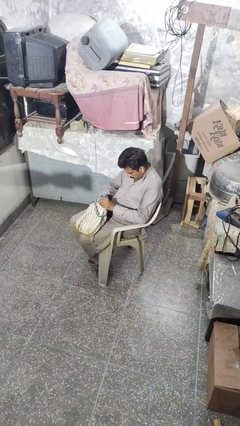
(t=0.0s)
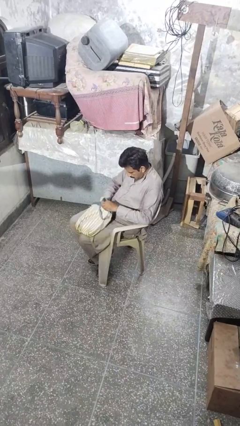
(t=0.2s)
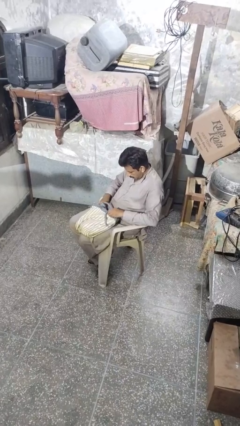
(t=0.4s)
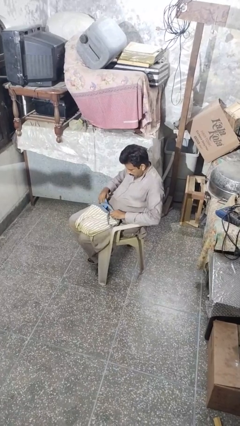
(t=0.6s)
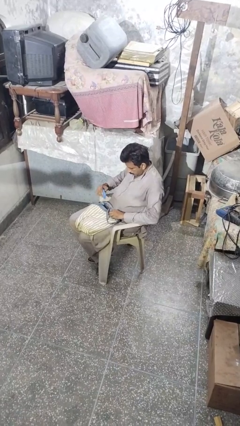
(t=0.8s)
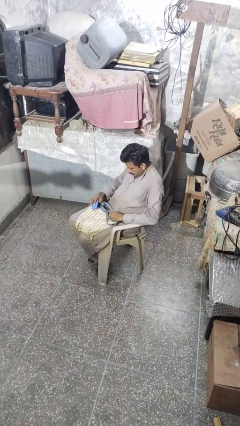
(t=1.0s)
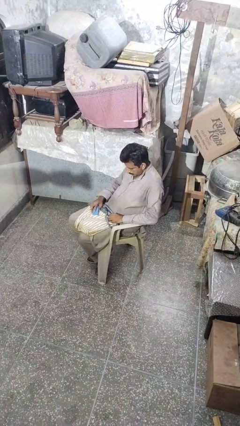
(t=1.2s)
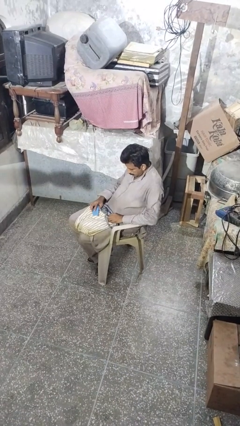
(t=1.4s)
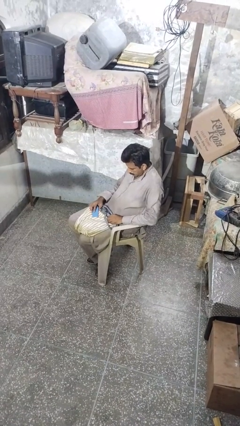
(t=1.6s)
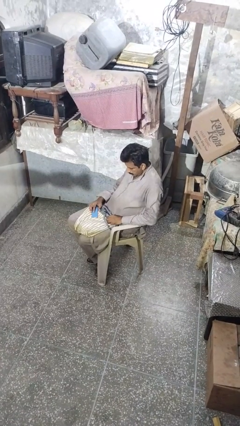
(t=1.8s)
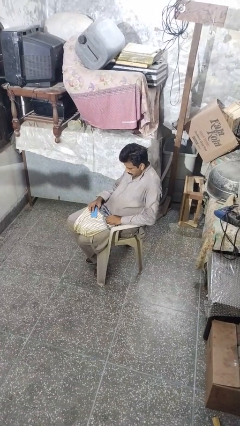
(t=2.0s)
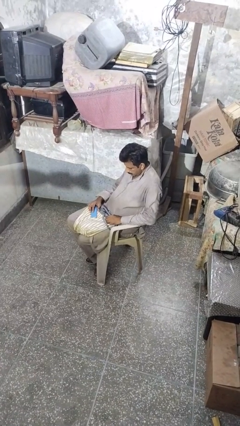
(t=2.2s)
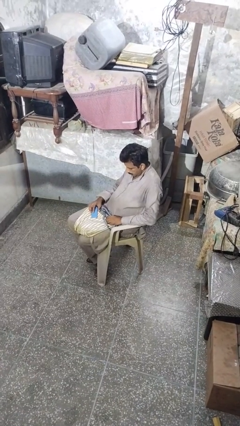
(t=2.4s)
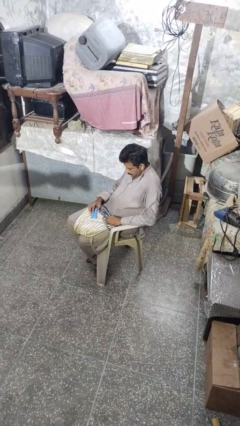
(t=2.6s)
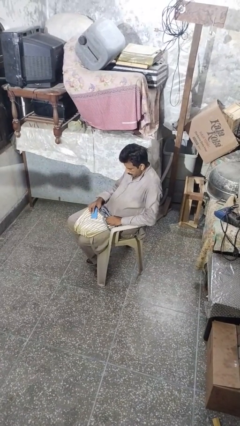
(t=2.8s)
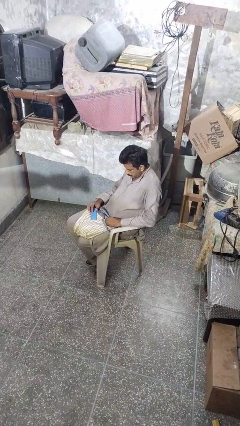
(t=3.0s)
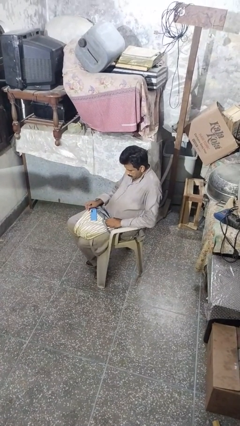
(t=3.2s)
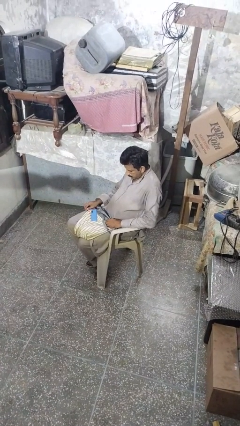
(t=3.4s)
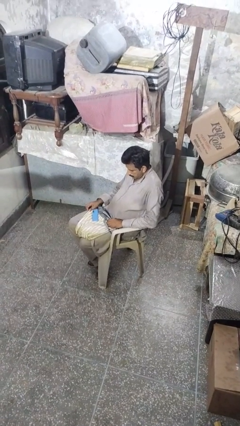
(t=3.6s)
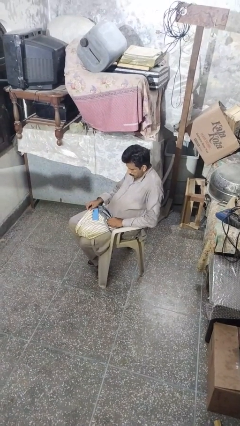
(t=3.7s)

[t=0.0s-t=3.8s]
person takes object from purse

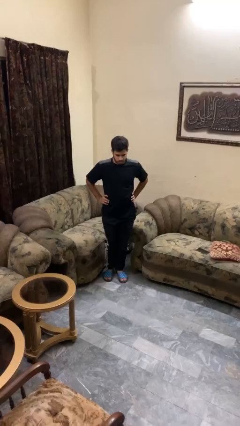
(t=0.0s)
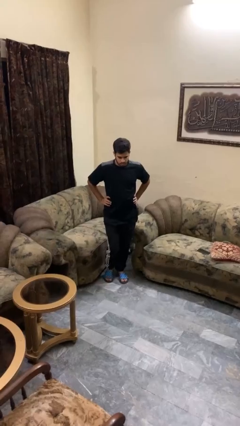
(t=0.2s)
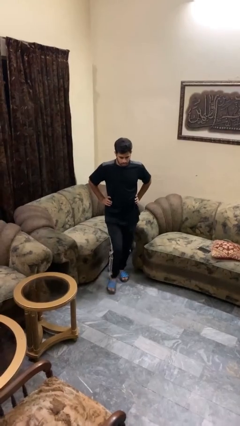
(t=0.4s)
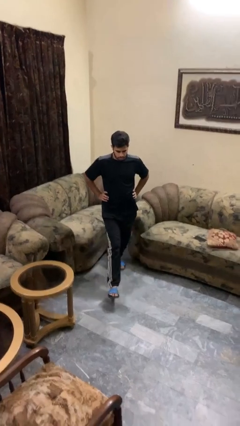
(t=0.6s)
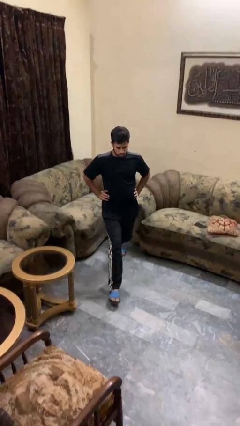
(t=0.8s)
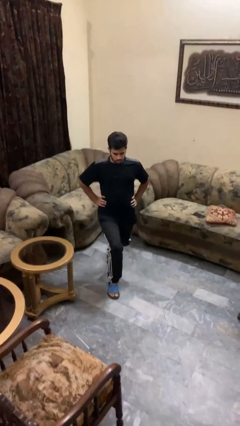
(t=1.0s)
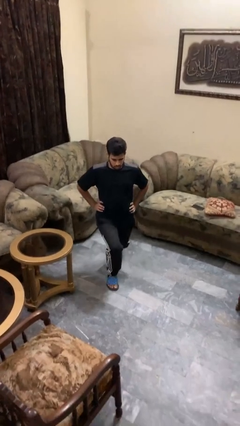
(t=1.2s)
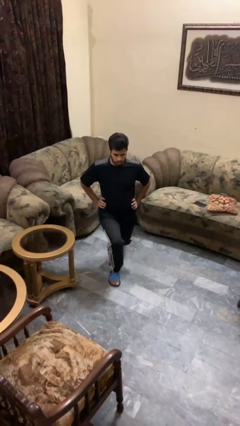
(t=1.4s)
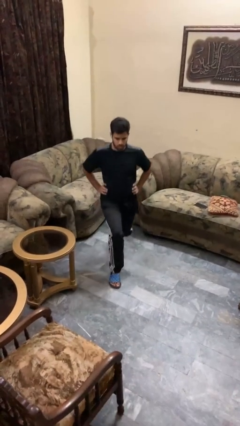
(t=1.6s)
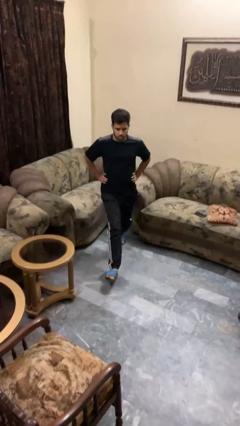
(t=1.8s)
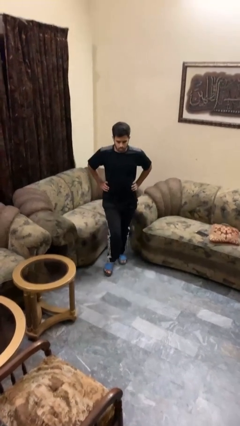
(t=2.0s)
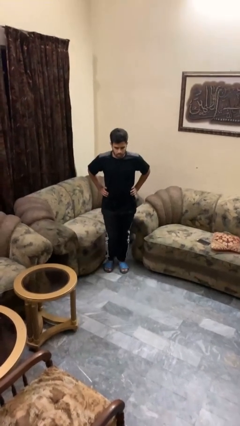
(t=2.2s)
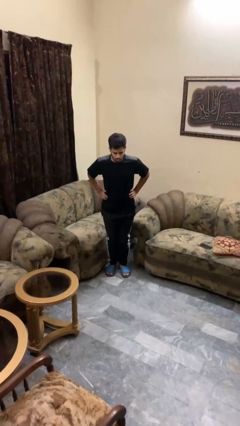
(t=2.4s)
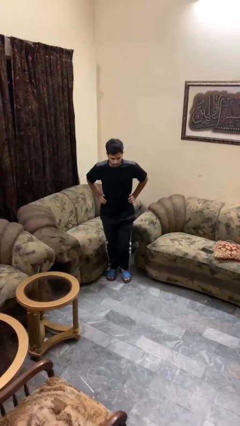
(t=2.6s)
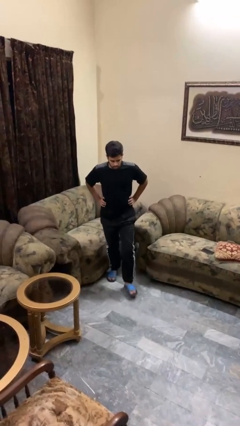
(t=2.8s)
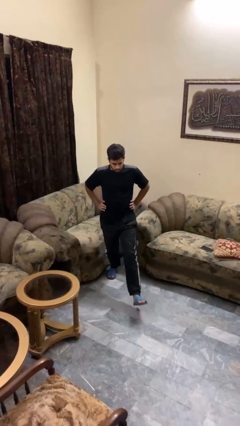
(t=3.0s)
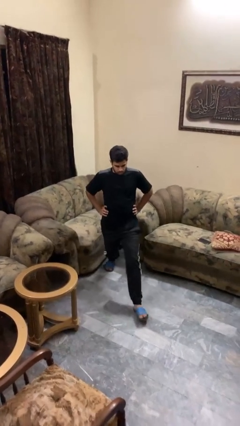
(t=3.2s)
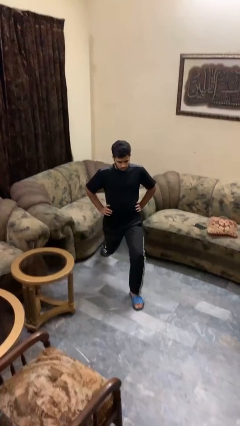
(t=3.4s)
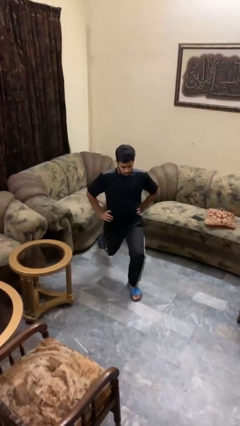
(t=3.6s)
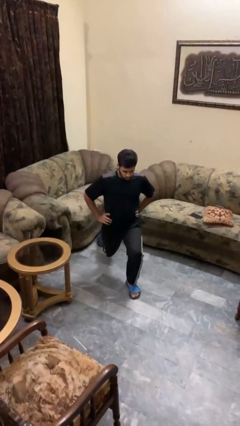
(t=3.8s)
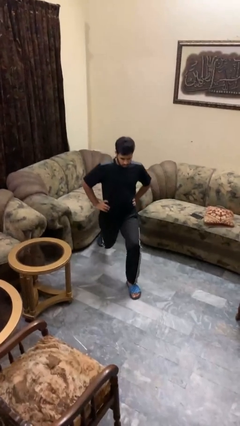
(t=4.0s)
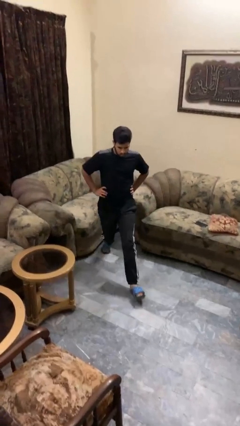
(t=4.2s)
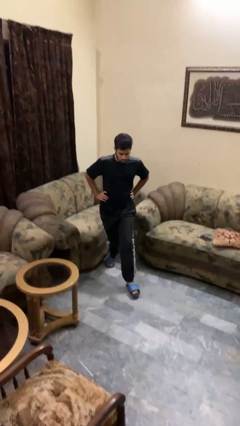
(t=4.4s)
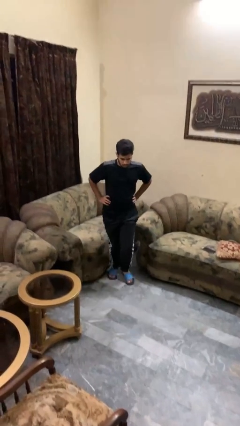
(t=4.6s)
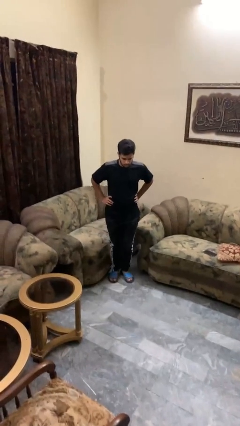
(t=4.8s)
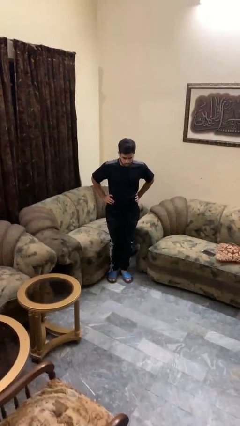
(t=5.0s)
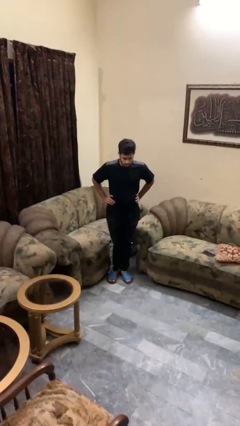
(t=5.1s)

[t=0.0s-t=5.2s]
person exercises with lunges

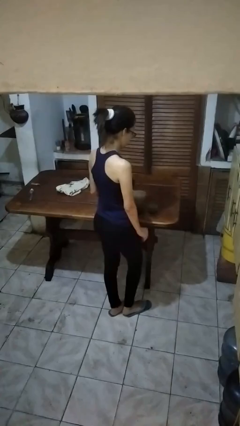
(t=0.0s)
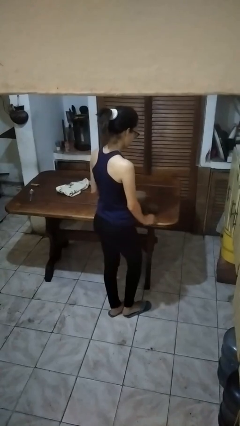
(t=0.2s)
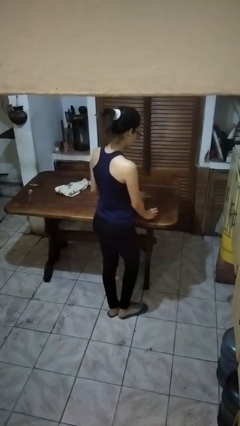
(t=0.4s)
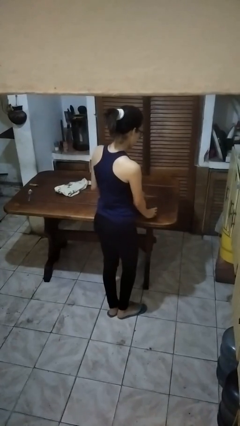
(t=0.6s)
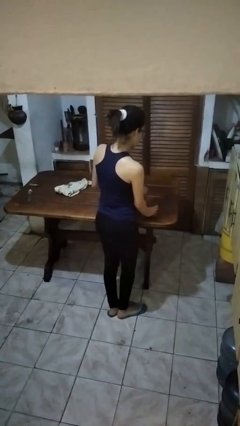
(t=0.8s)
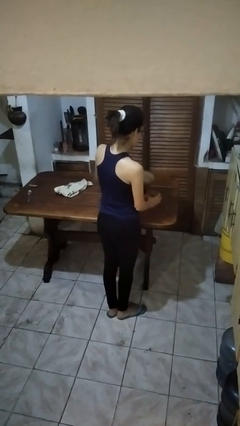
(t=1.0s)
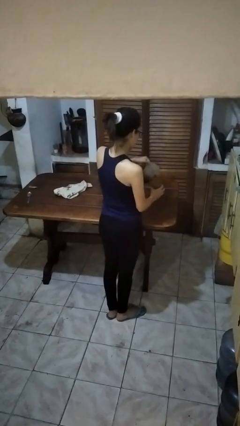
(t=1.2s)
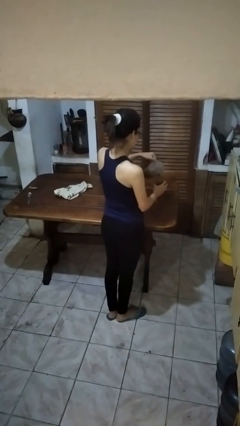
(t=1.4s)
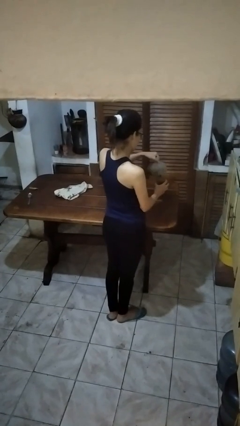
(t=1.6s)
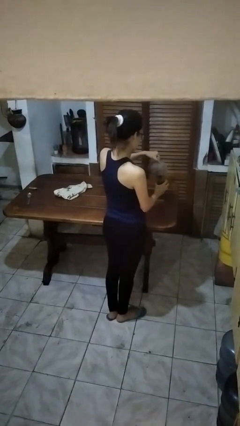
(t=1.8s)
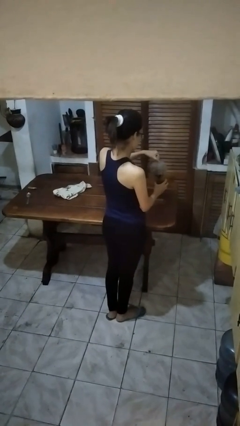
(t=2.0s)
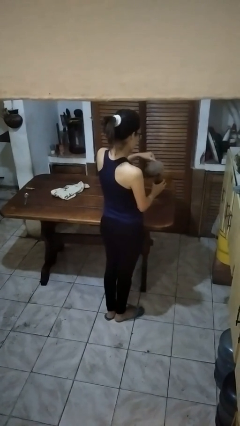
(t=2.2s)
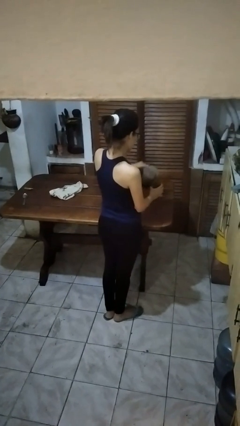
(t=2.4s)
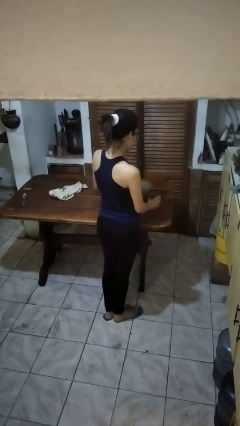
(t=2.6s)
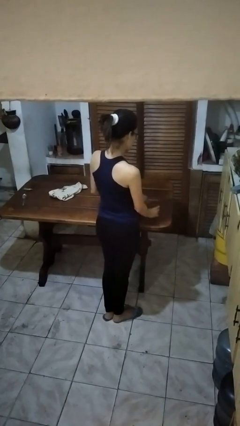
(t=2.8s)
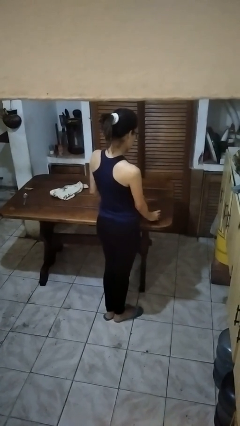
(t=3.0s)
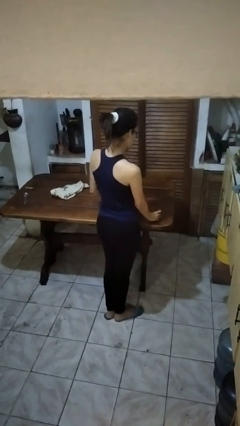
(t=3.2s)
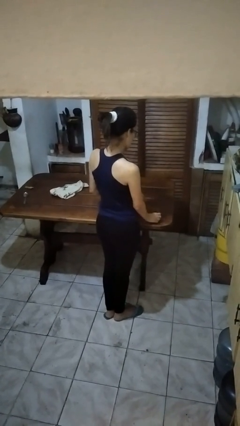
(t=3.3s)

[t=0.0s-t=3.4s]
person pours coffee into mug

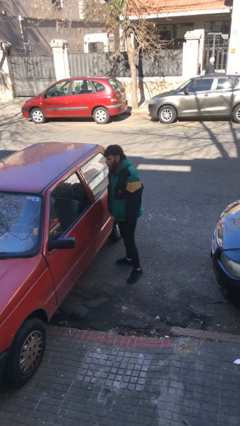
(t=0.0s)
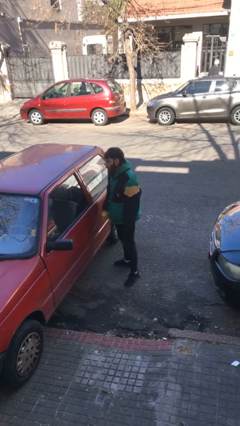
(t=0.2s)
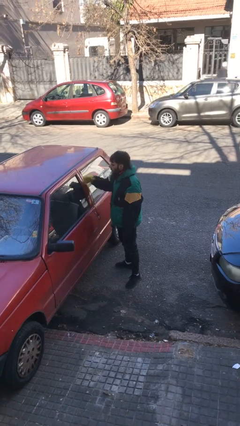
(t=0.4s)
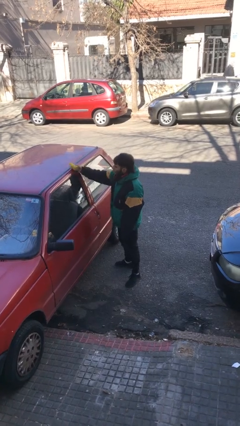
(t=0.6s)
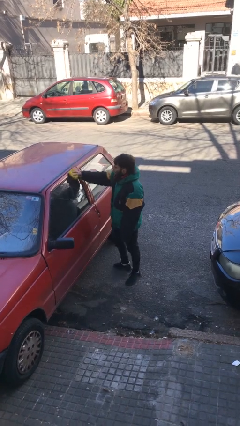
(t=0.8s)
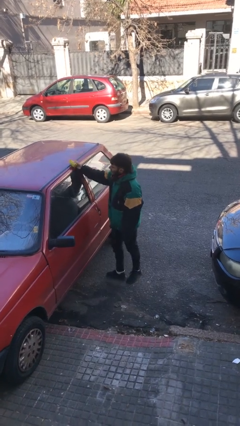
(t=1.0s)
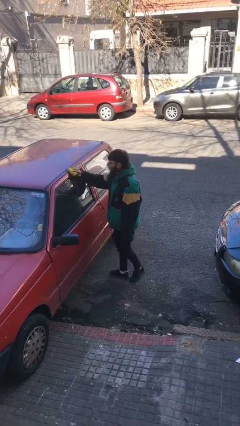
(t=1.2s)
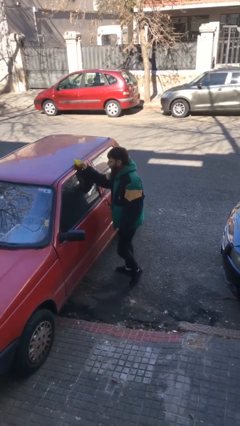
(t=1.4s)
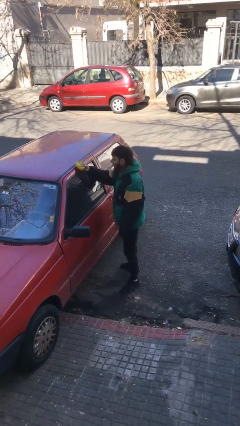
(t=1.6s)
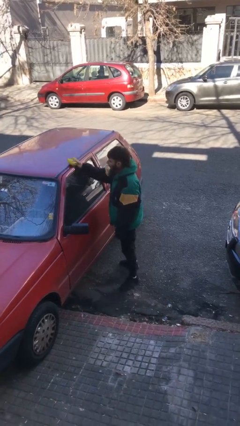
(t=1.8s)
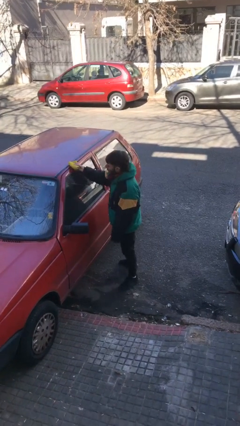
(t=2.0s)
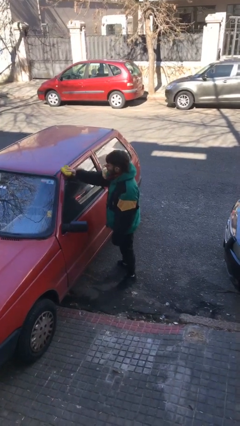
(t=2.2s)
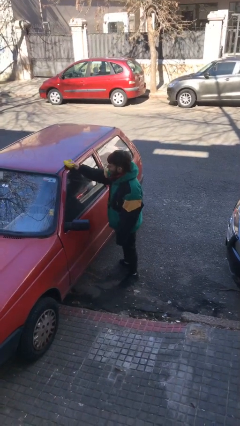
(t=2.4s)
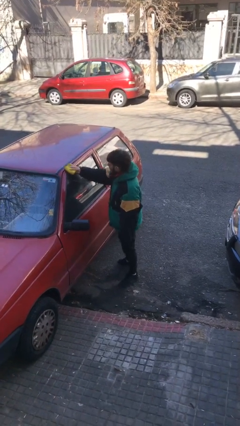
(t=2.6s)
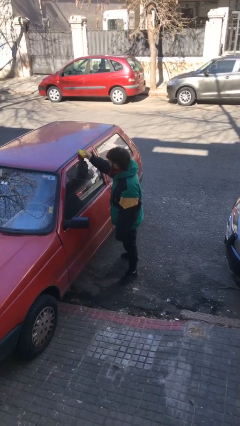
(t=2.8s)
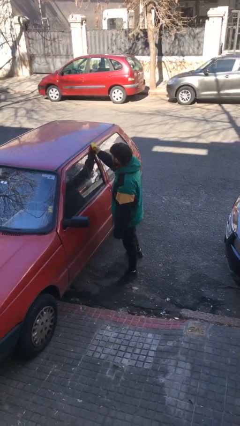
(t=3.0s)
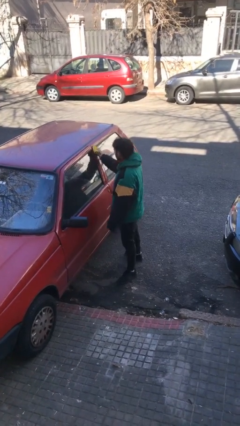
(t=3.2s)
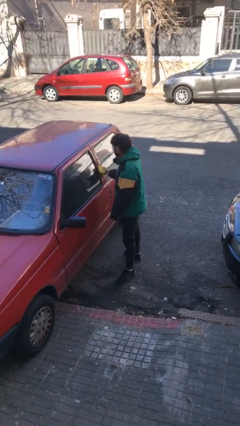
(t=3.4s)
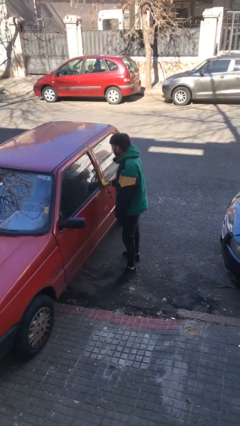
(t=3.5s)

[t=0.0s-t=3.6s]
person polishes car with rag

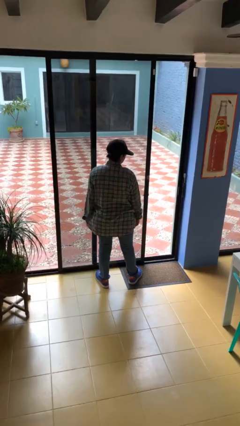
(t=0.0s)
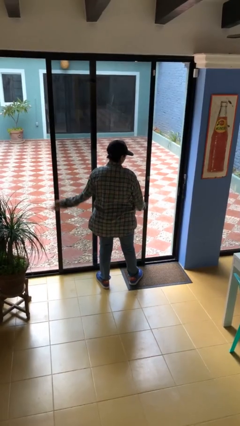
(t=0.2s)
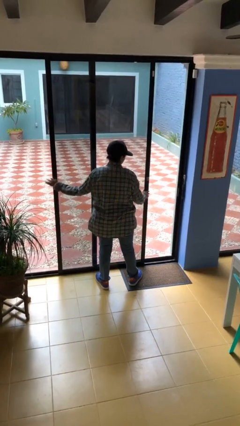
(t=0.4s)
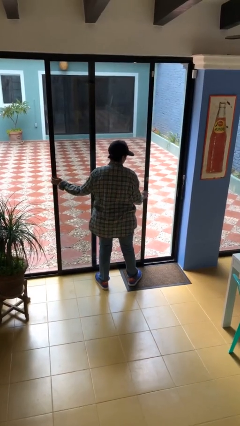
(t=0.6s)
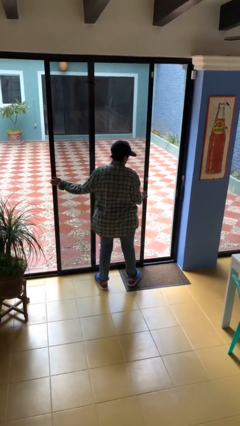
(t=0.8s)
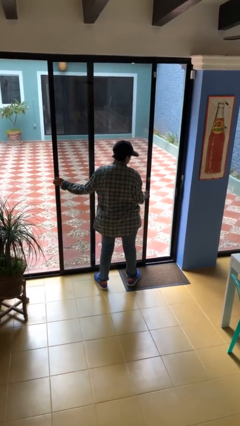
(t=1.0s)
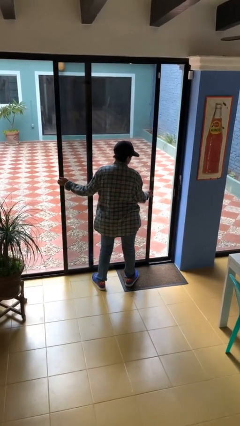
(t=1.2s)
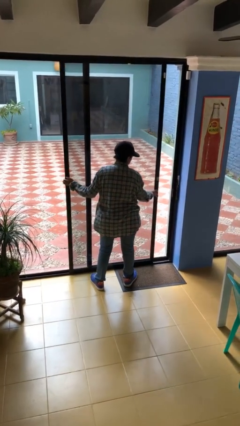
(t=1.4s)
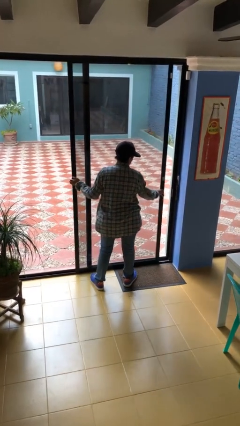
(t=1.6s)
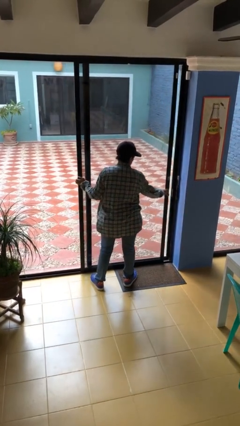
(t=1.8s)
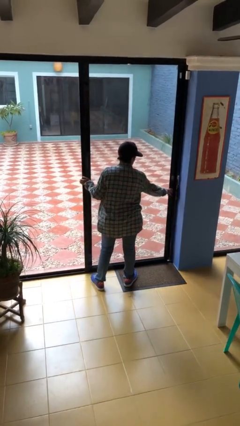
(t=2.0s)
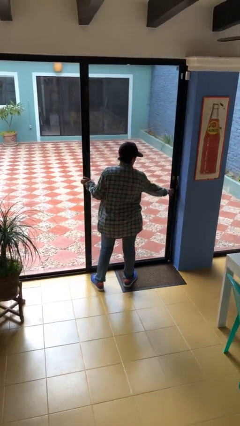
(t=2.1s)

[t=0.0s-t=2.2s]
person closes sliding door
